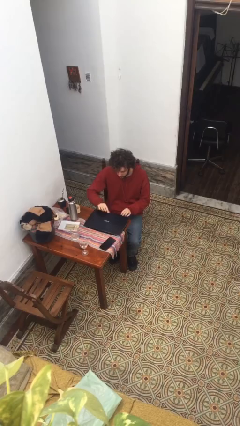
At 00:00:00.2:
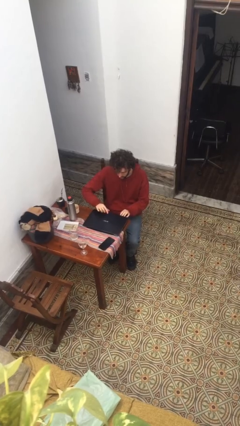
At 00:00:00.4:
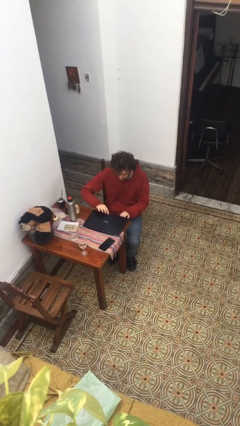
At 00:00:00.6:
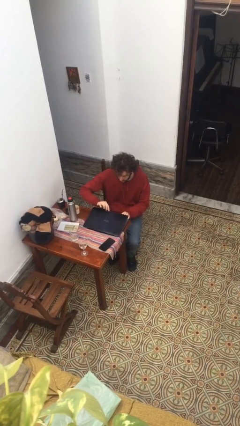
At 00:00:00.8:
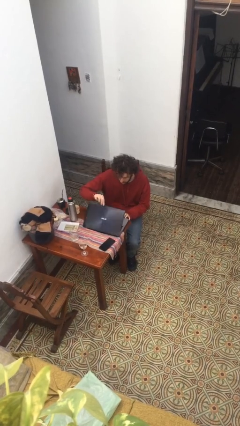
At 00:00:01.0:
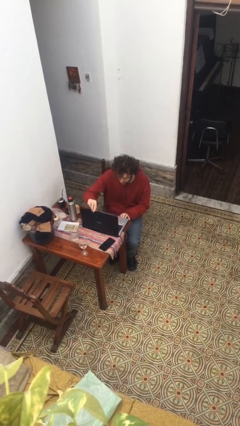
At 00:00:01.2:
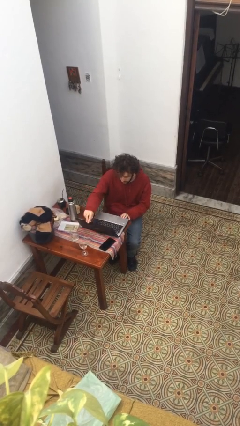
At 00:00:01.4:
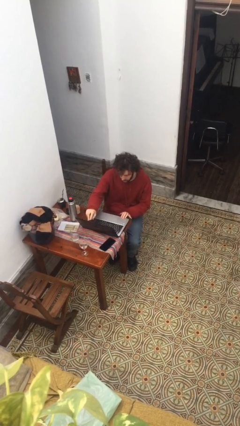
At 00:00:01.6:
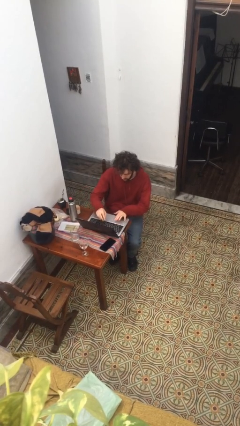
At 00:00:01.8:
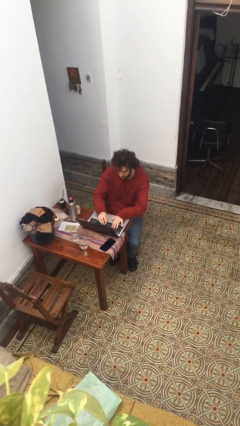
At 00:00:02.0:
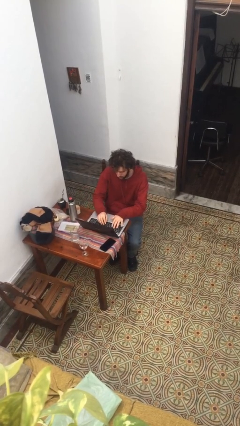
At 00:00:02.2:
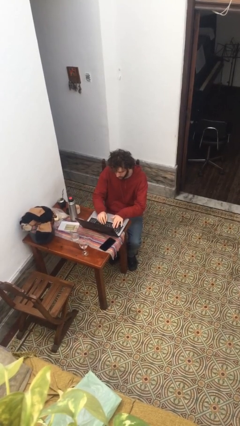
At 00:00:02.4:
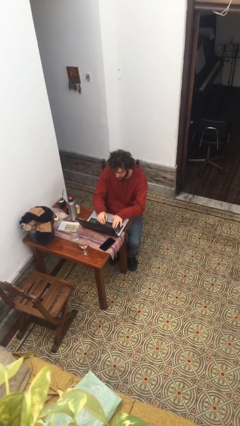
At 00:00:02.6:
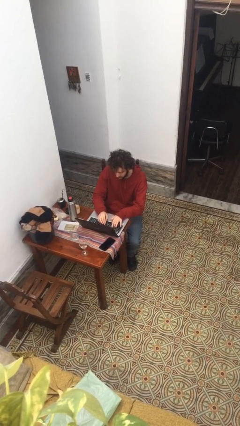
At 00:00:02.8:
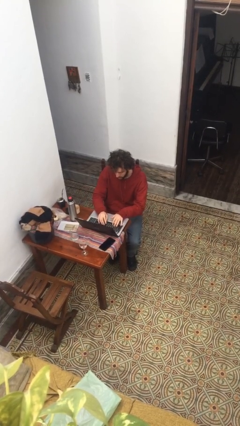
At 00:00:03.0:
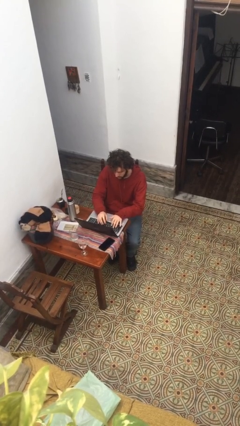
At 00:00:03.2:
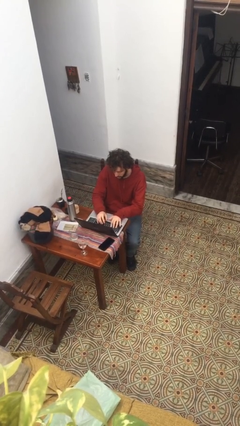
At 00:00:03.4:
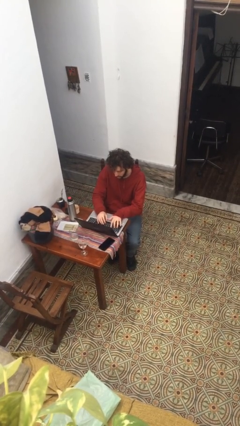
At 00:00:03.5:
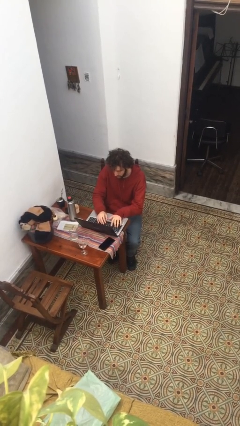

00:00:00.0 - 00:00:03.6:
person opens laptop

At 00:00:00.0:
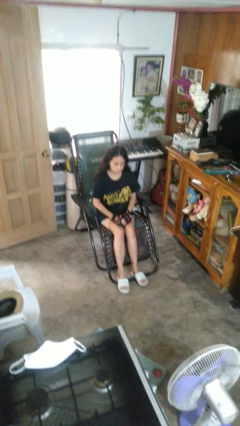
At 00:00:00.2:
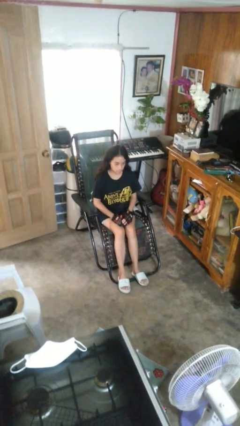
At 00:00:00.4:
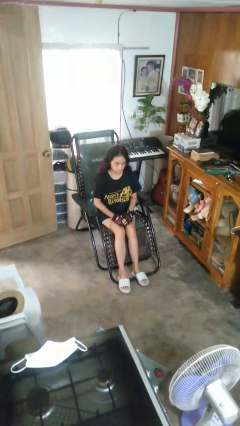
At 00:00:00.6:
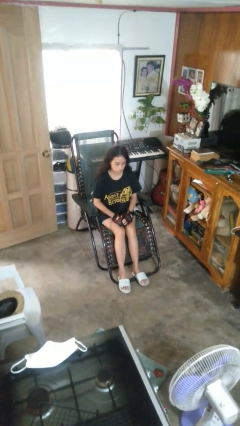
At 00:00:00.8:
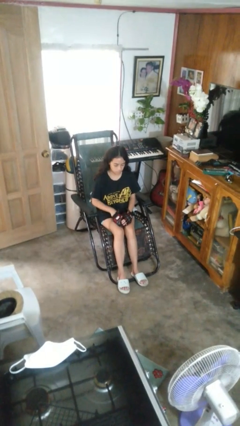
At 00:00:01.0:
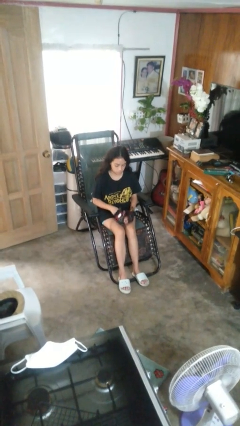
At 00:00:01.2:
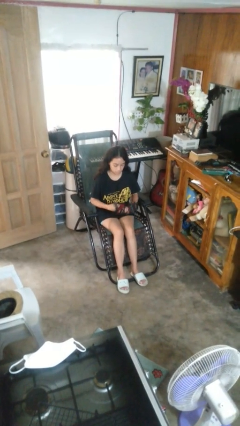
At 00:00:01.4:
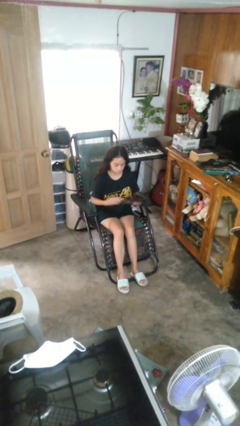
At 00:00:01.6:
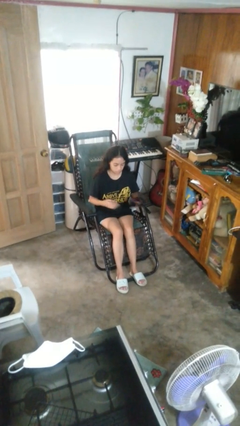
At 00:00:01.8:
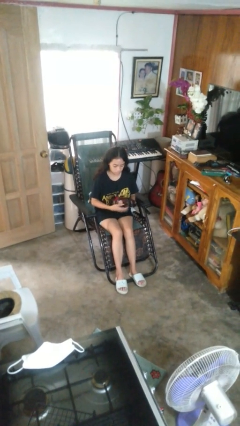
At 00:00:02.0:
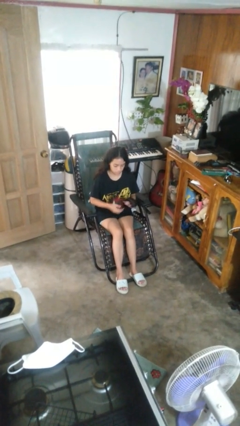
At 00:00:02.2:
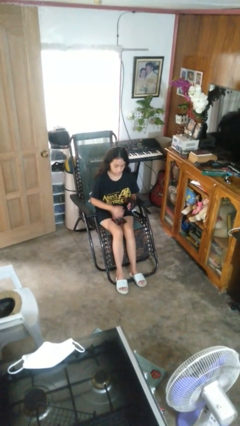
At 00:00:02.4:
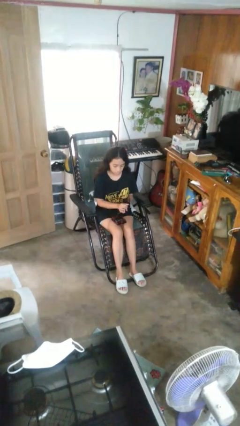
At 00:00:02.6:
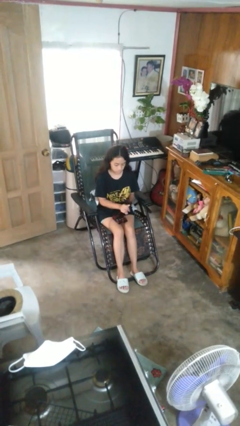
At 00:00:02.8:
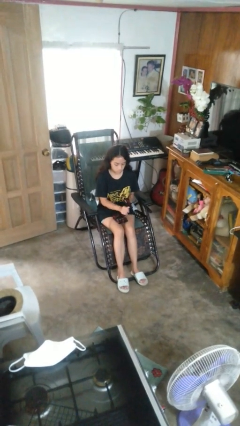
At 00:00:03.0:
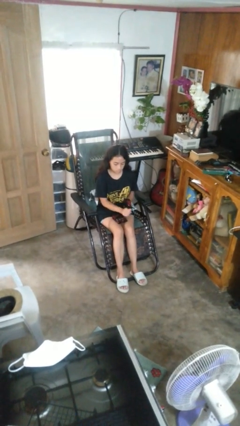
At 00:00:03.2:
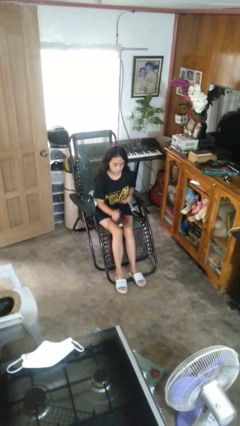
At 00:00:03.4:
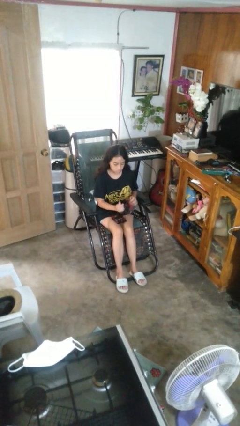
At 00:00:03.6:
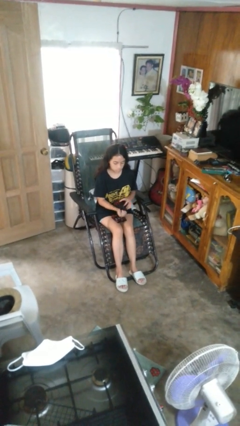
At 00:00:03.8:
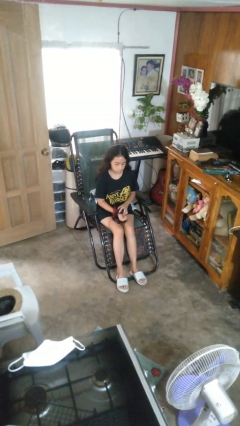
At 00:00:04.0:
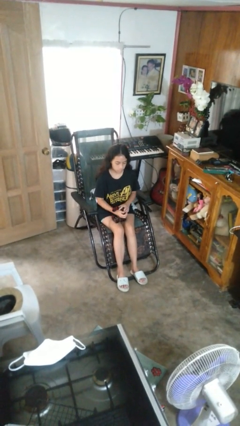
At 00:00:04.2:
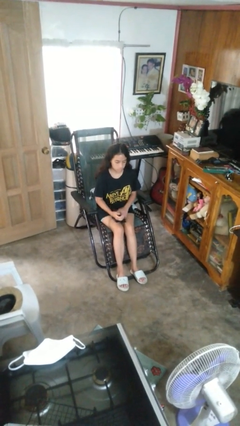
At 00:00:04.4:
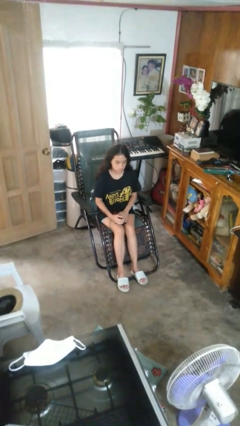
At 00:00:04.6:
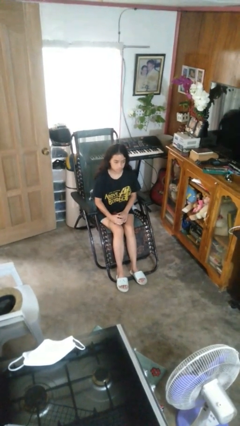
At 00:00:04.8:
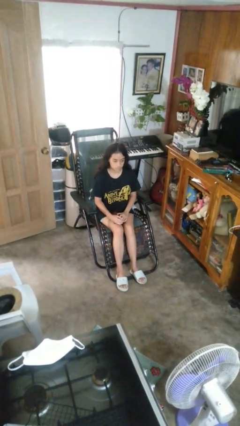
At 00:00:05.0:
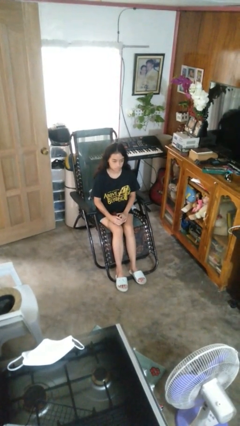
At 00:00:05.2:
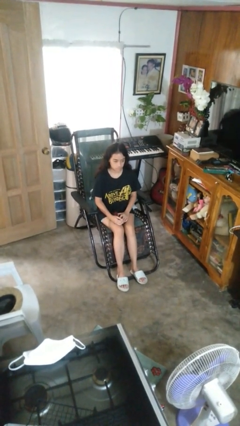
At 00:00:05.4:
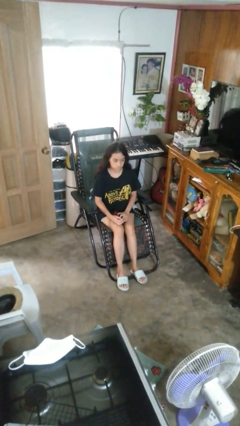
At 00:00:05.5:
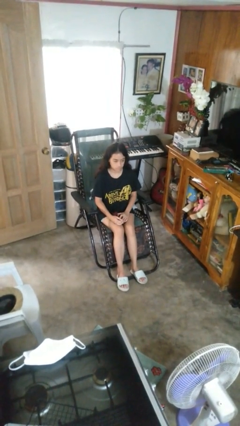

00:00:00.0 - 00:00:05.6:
person takes off gloves

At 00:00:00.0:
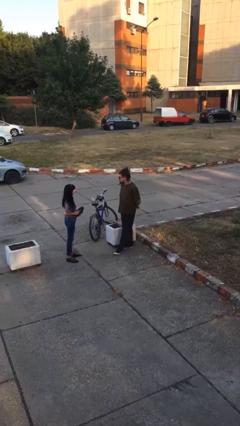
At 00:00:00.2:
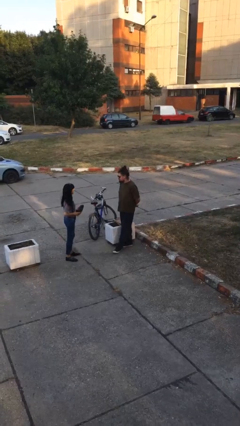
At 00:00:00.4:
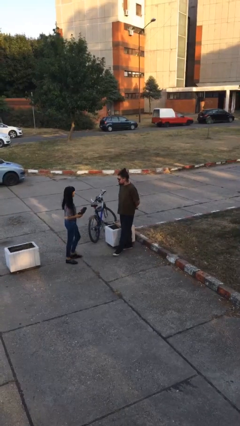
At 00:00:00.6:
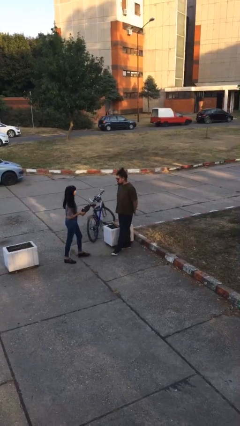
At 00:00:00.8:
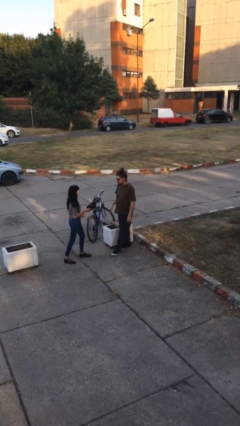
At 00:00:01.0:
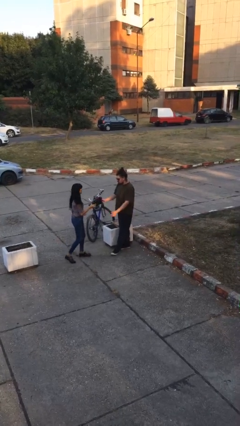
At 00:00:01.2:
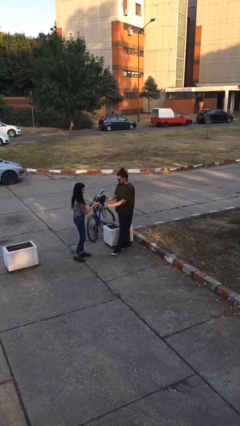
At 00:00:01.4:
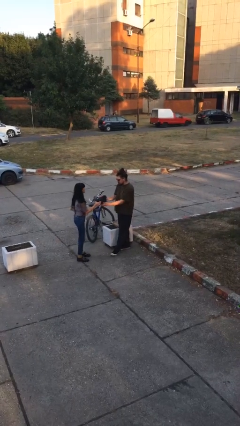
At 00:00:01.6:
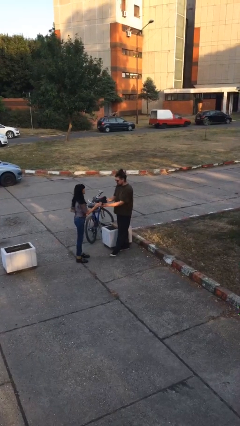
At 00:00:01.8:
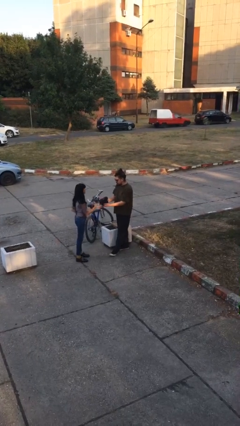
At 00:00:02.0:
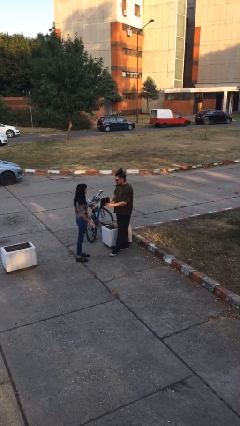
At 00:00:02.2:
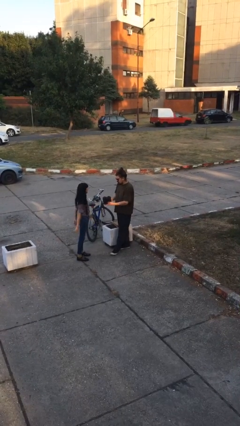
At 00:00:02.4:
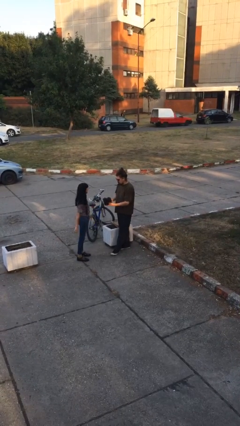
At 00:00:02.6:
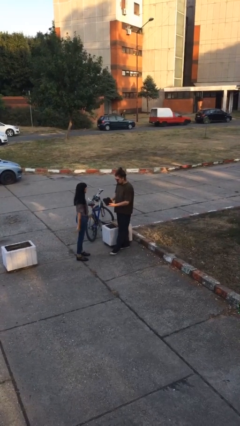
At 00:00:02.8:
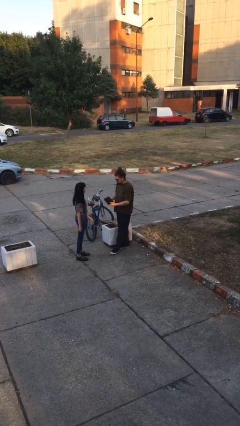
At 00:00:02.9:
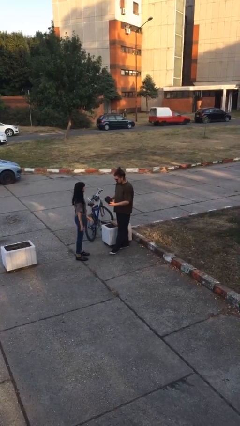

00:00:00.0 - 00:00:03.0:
person transfers object to person

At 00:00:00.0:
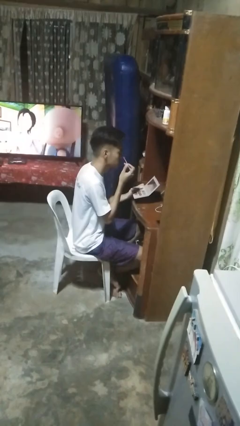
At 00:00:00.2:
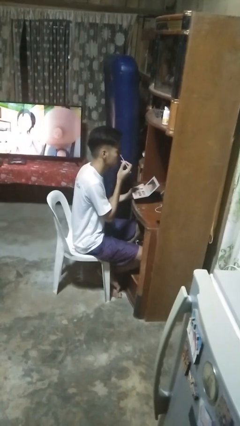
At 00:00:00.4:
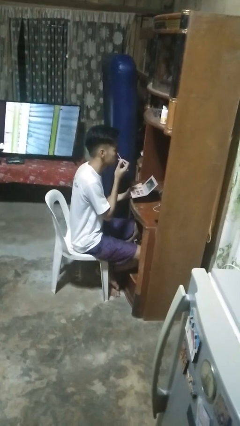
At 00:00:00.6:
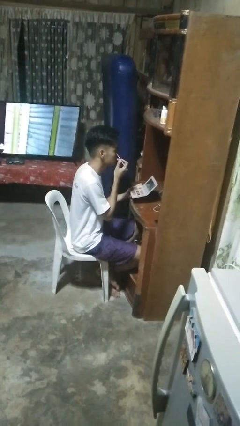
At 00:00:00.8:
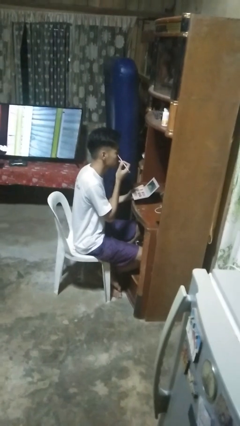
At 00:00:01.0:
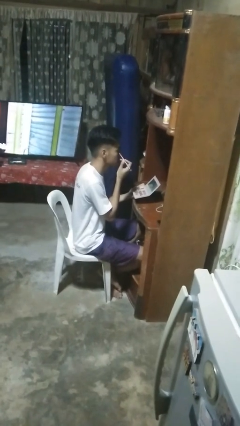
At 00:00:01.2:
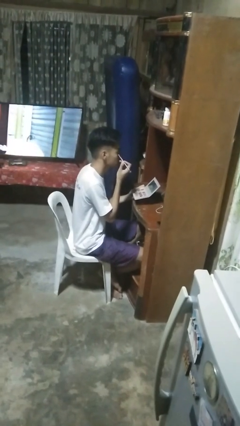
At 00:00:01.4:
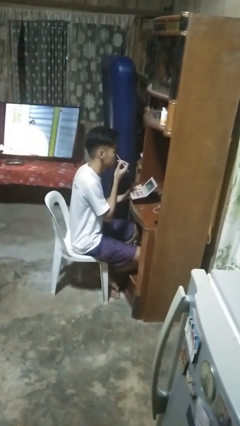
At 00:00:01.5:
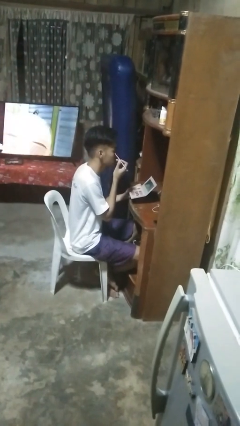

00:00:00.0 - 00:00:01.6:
person applies eye makeup

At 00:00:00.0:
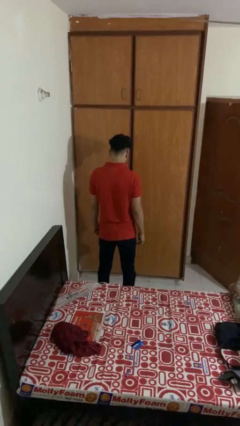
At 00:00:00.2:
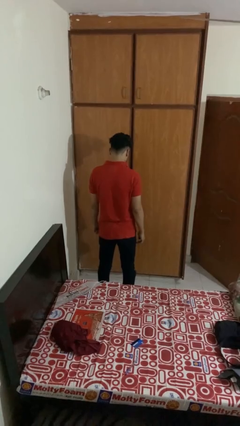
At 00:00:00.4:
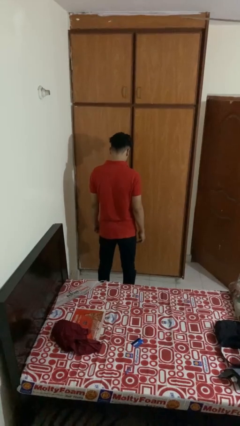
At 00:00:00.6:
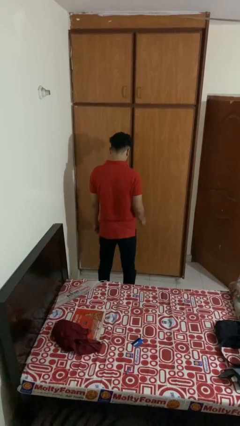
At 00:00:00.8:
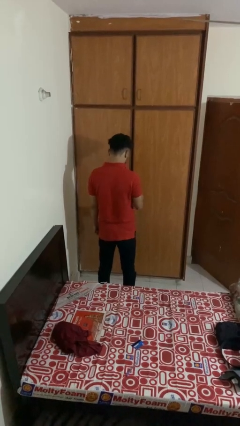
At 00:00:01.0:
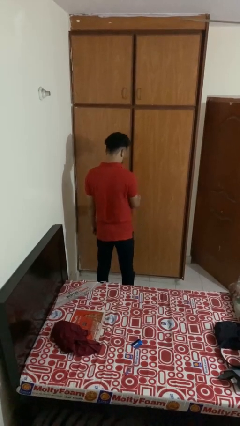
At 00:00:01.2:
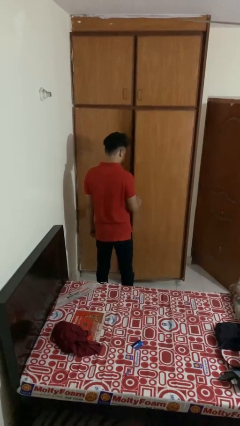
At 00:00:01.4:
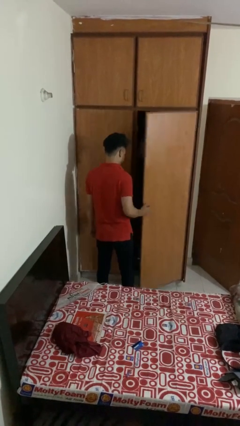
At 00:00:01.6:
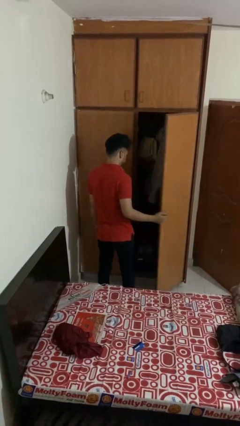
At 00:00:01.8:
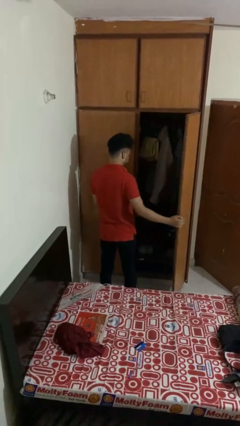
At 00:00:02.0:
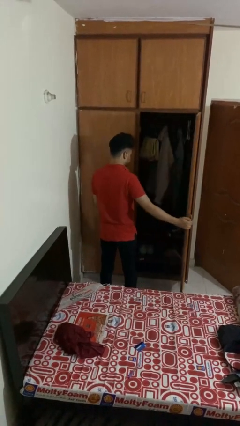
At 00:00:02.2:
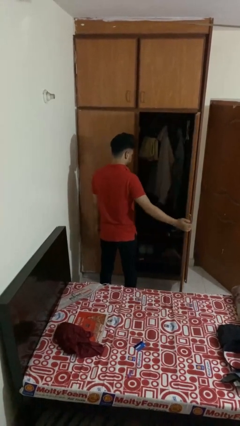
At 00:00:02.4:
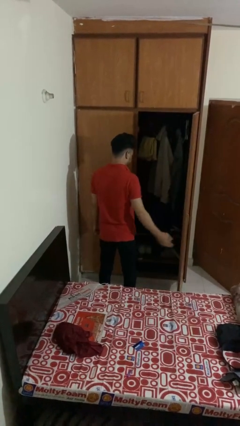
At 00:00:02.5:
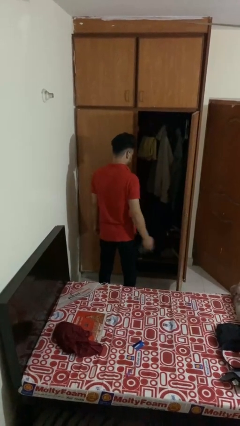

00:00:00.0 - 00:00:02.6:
person opens closet door

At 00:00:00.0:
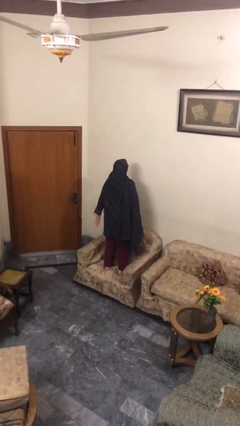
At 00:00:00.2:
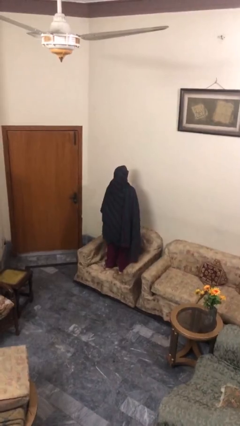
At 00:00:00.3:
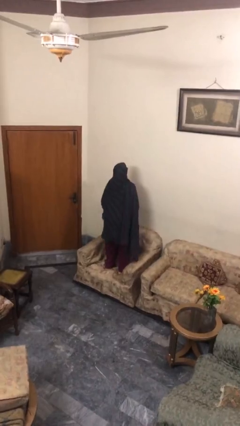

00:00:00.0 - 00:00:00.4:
person jumps on couch

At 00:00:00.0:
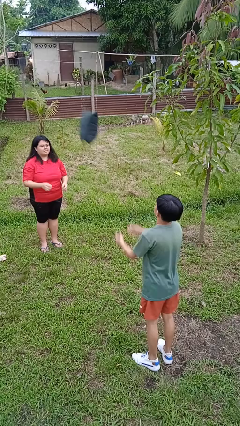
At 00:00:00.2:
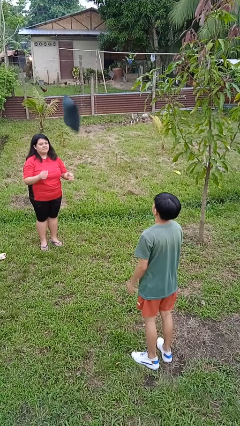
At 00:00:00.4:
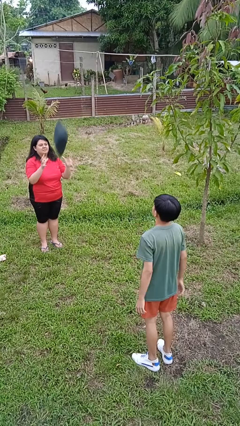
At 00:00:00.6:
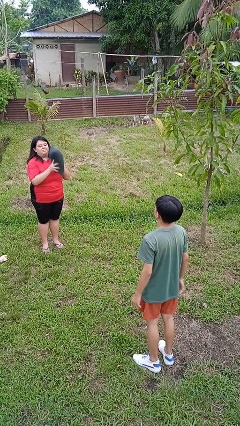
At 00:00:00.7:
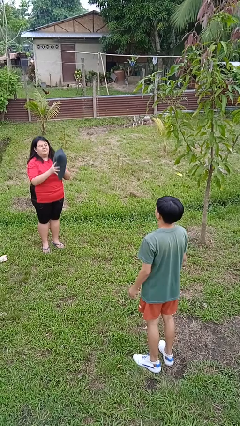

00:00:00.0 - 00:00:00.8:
person catches object from person
